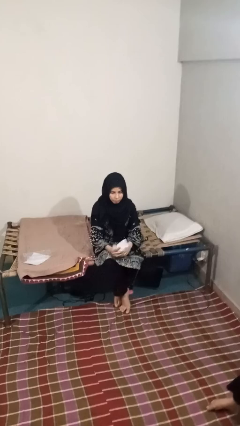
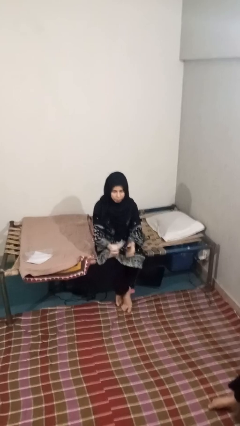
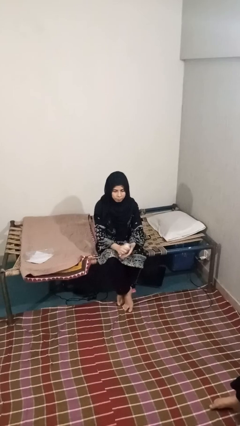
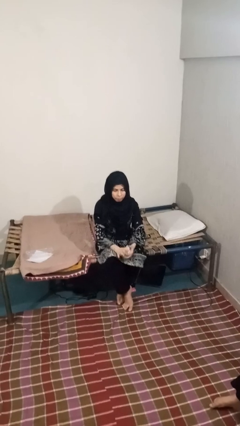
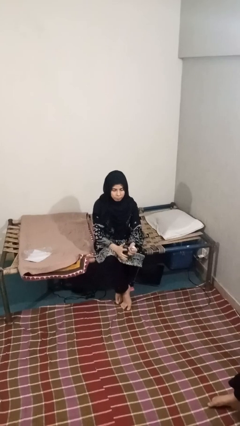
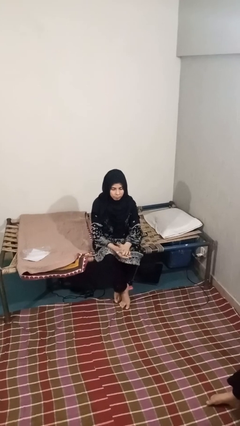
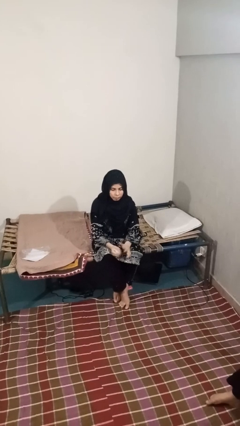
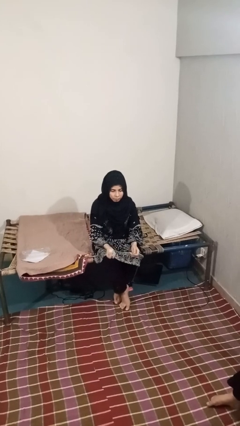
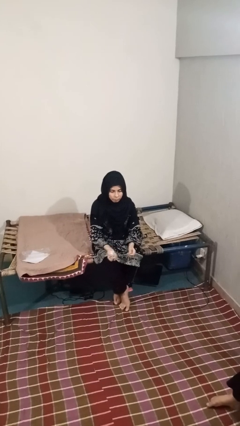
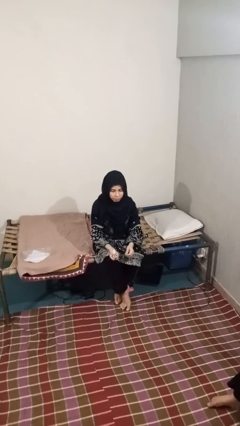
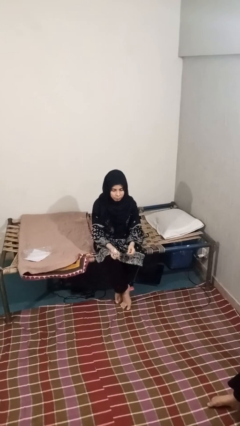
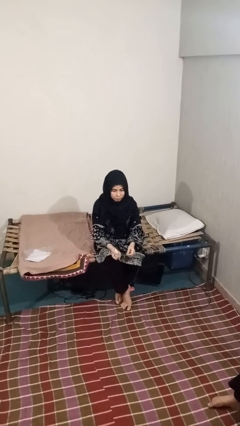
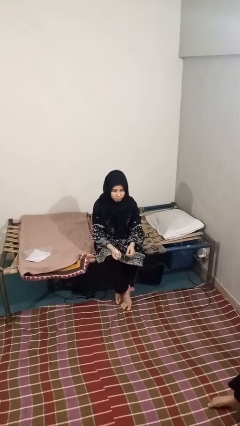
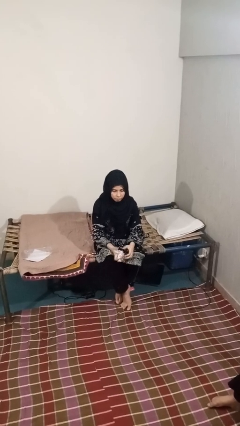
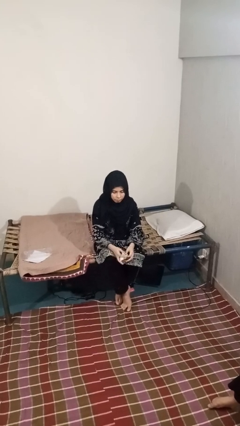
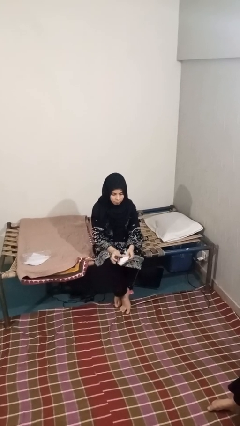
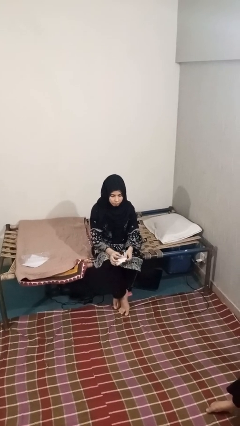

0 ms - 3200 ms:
person crumples paper

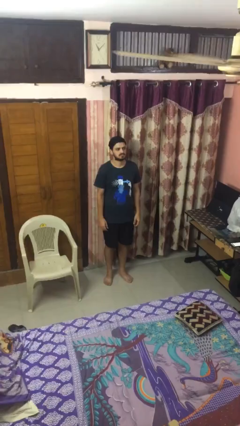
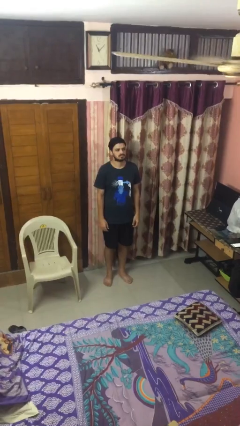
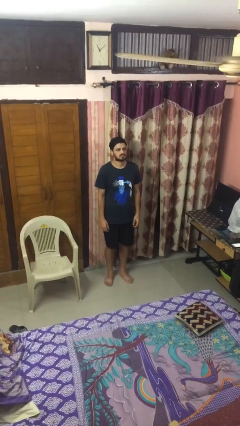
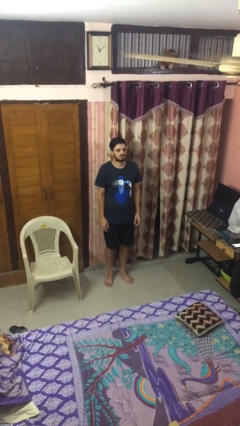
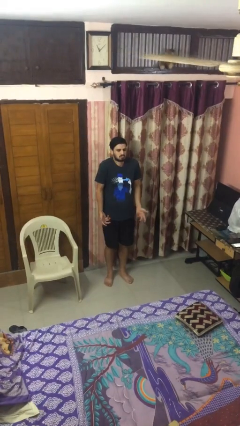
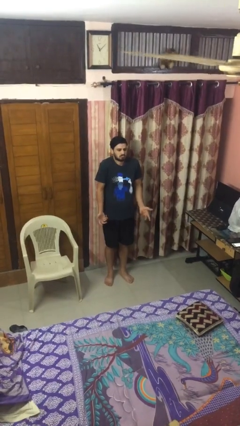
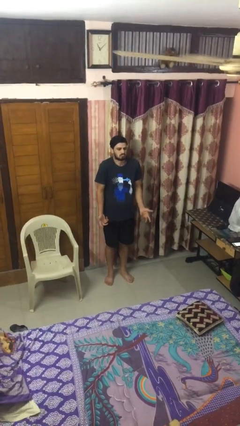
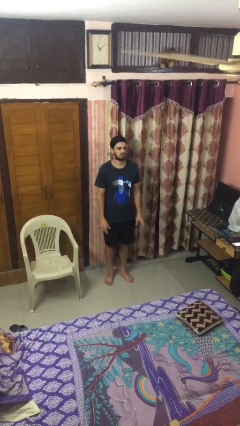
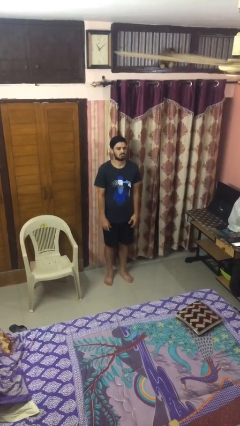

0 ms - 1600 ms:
person shrugs

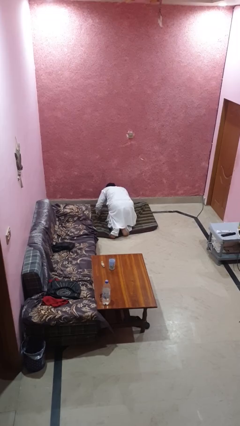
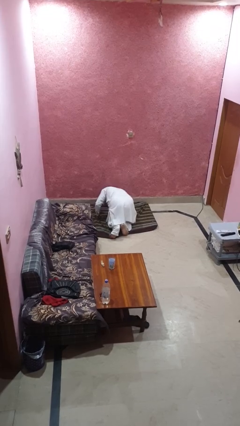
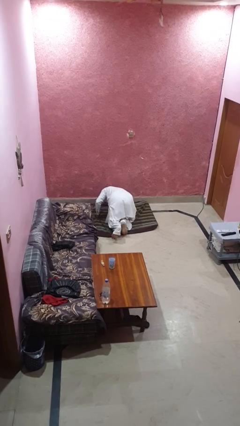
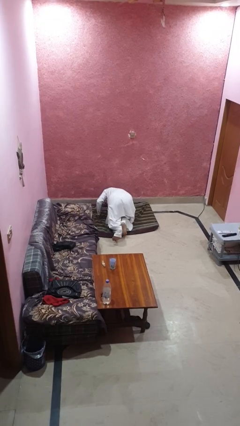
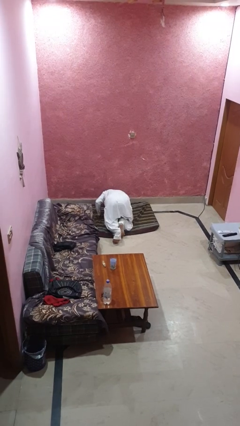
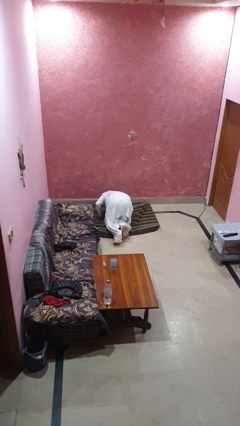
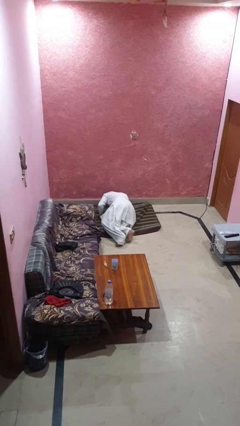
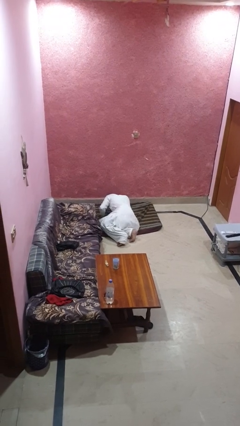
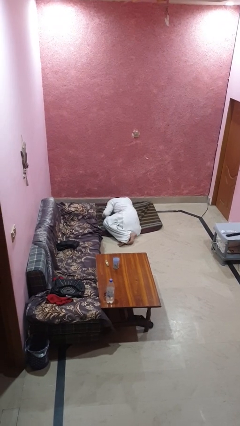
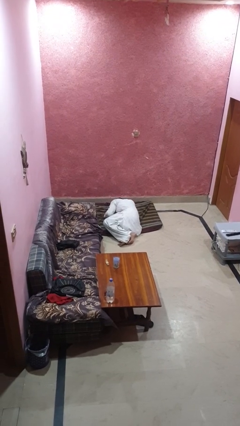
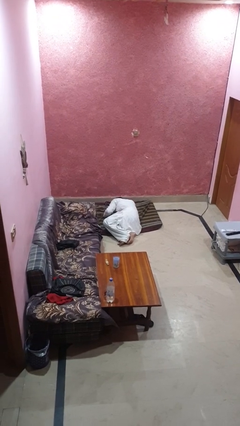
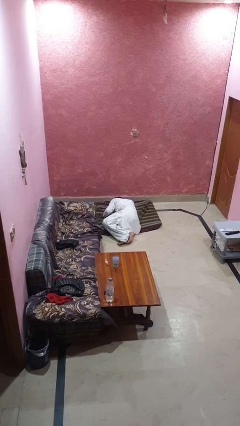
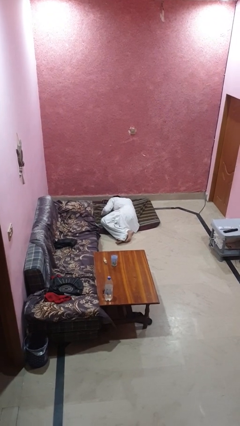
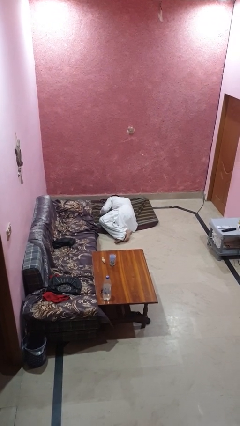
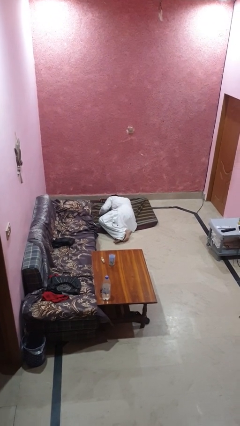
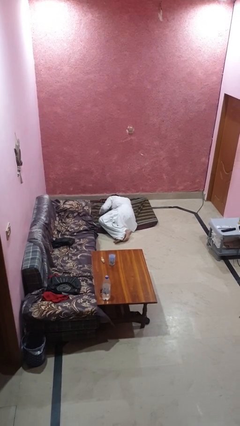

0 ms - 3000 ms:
person lies down on floor

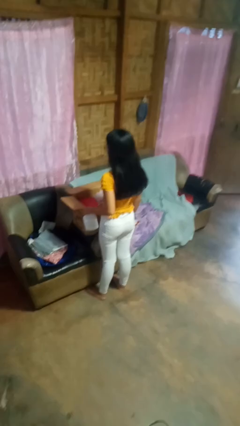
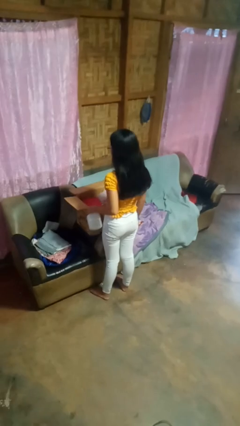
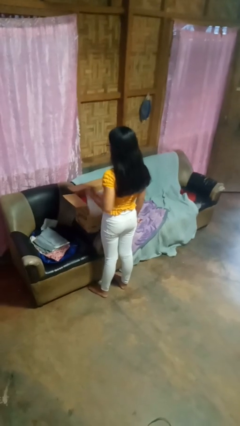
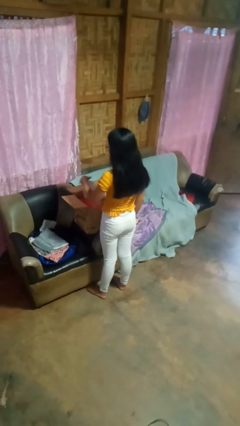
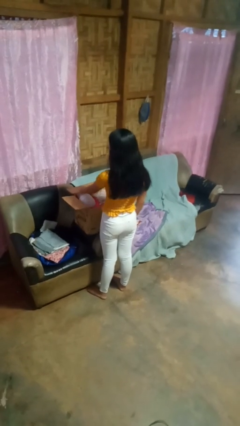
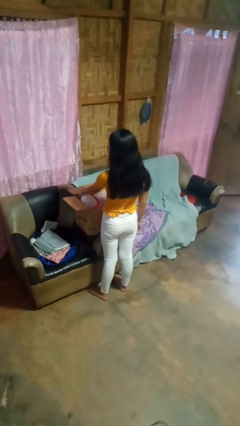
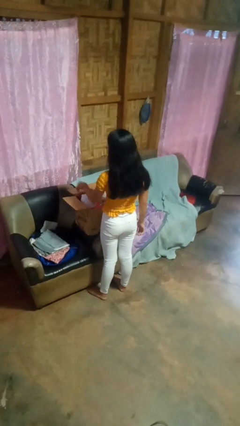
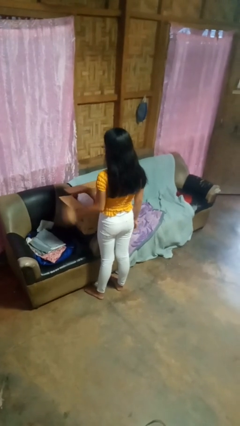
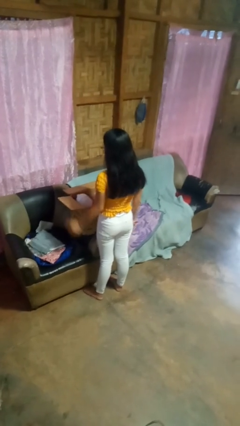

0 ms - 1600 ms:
person puts object into box

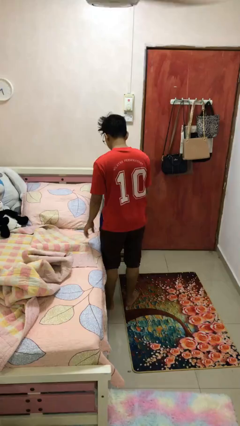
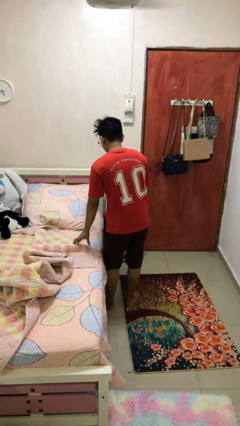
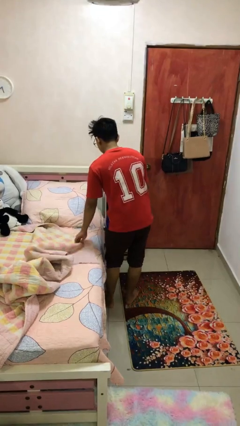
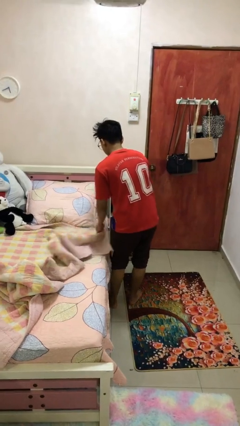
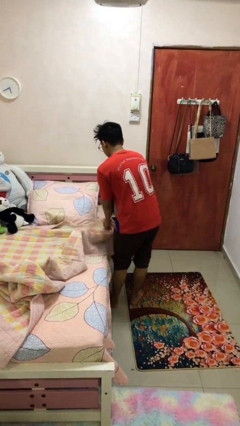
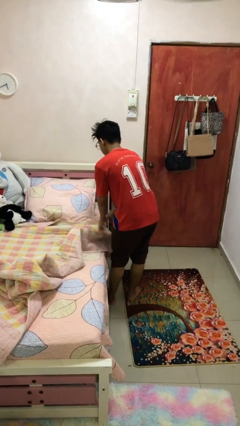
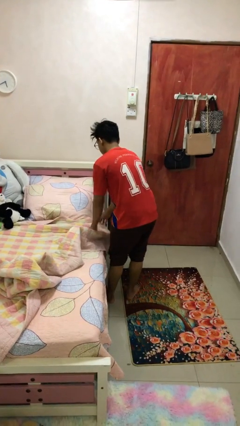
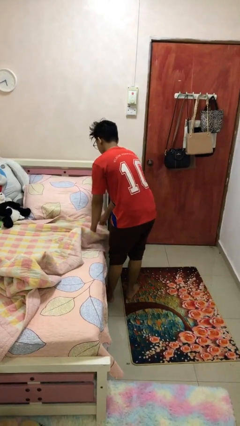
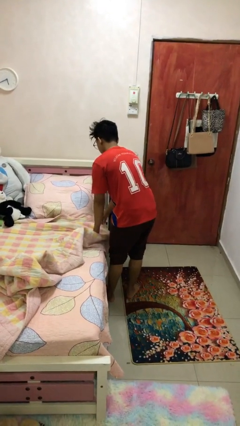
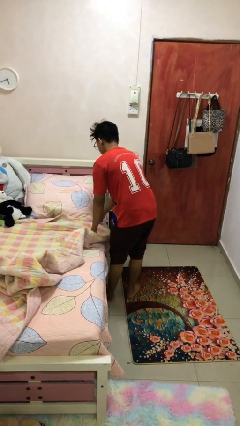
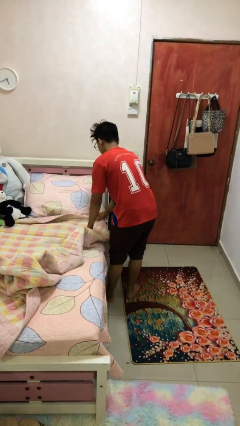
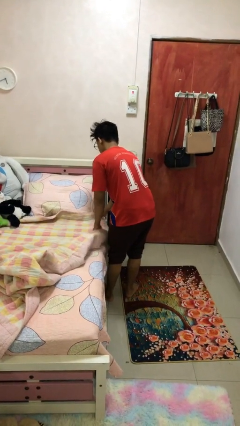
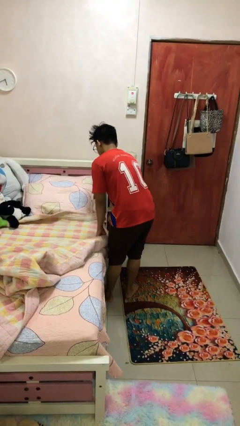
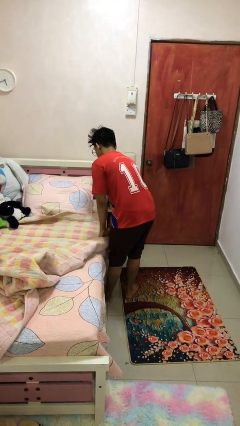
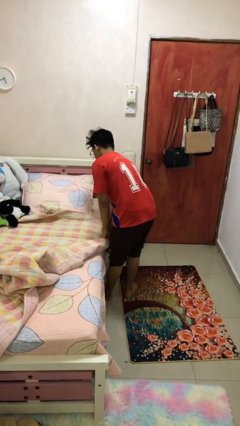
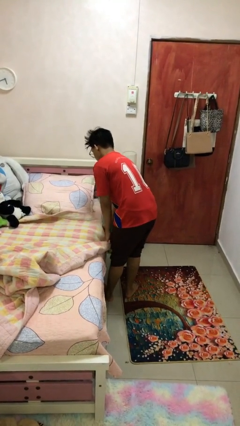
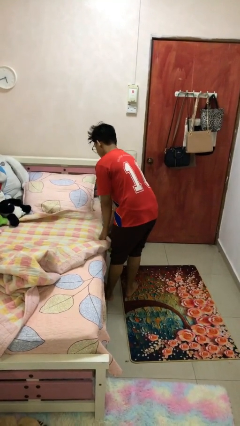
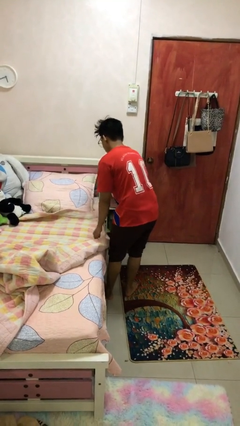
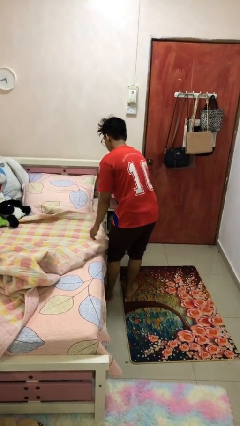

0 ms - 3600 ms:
person makes bed

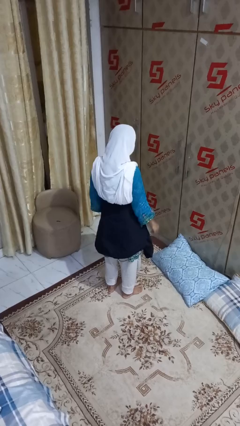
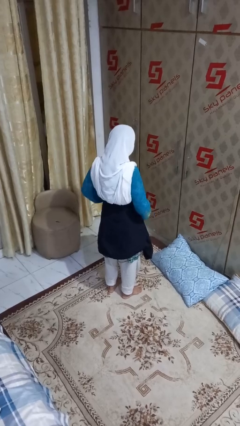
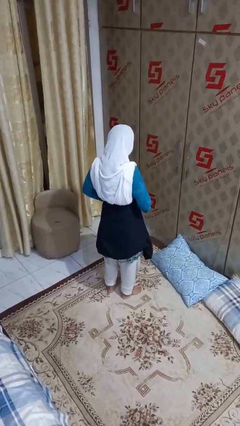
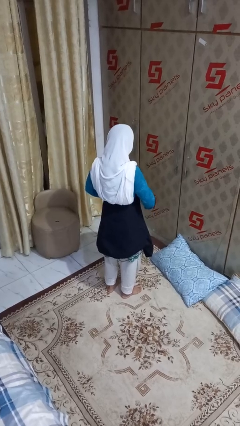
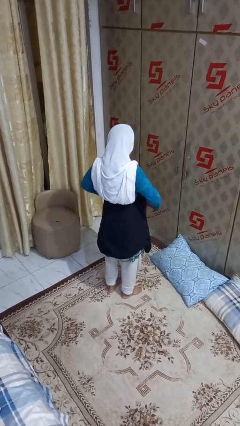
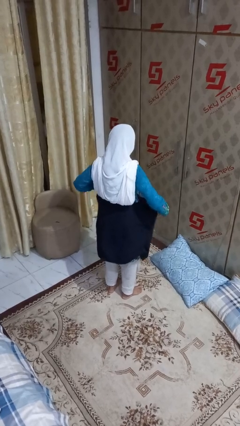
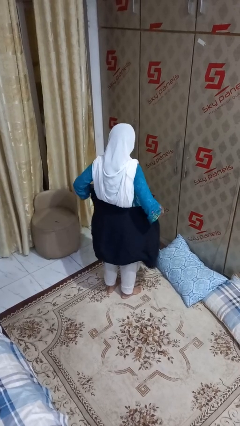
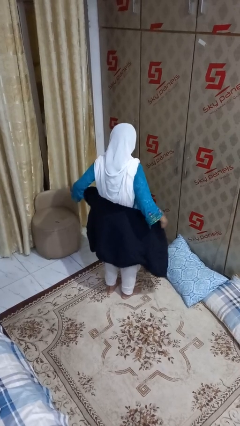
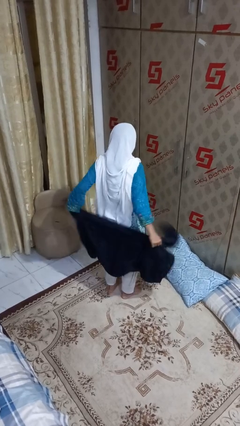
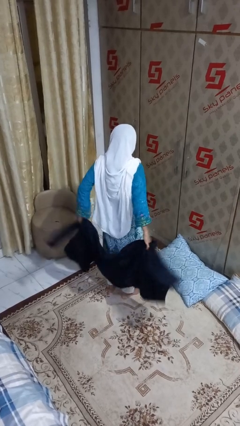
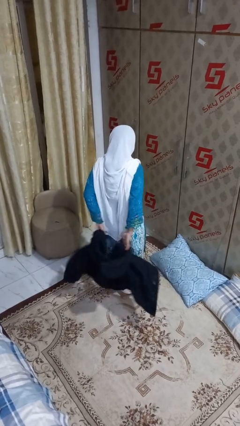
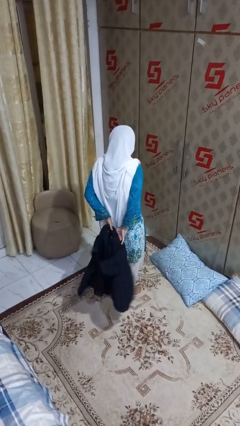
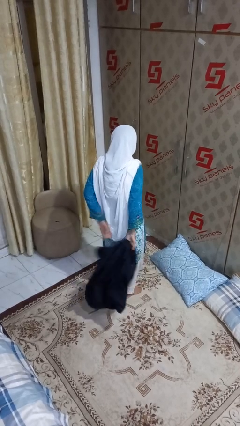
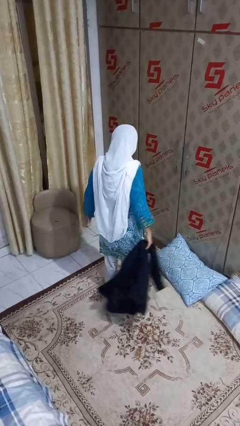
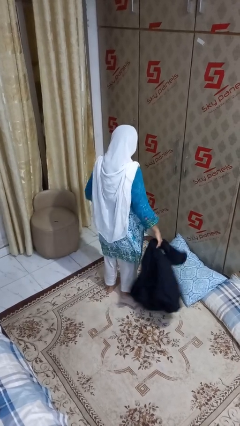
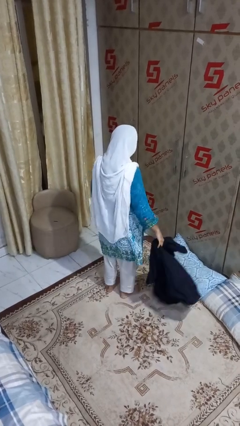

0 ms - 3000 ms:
person unties jacket around waist

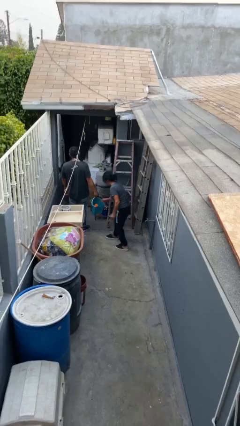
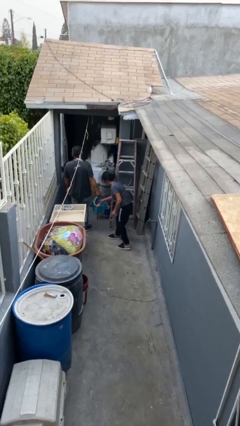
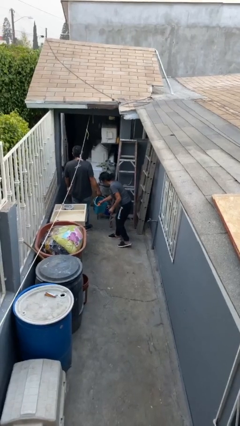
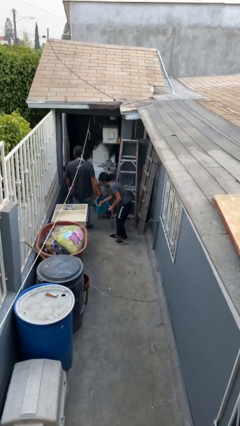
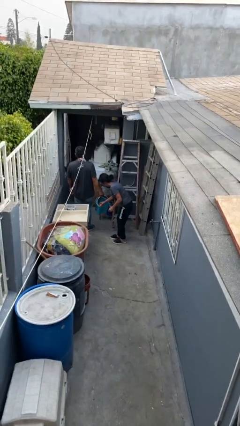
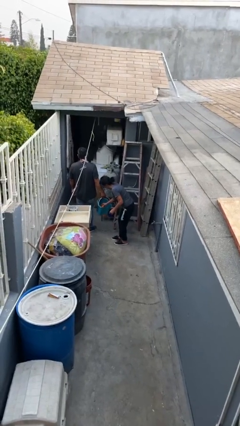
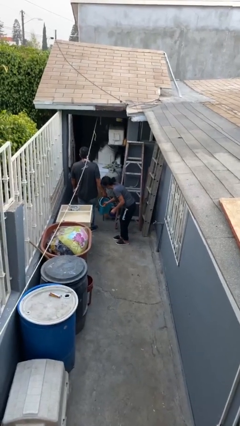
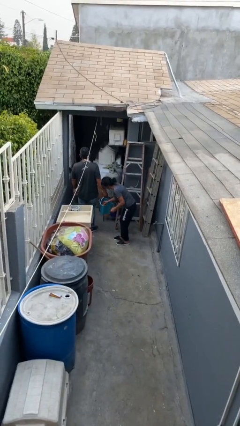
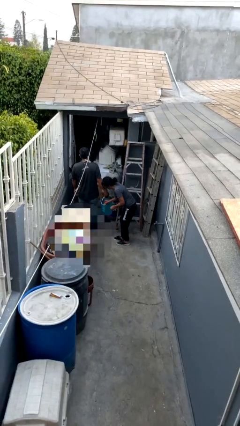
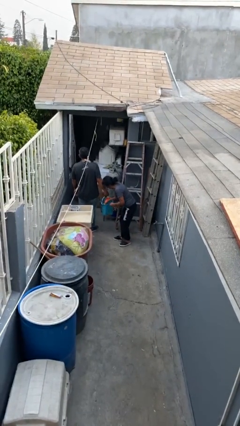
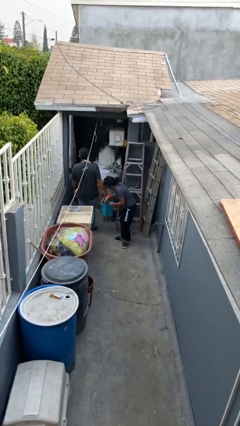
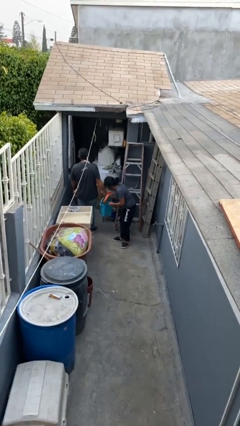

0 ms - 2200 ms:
person steals object from person
